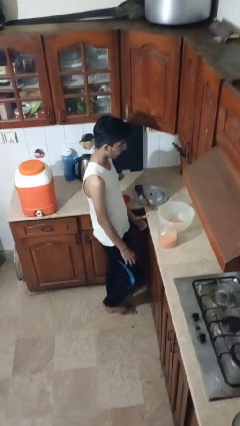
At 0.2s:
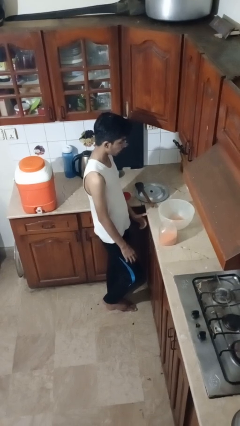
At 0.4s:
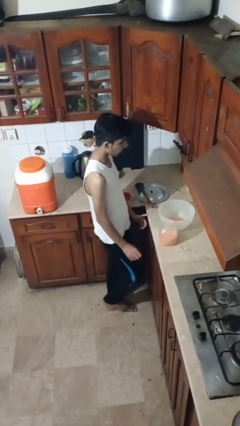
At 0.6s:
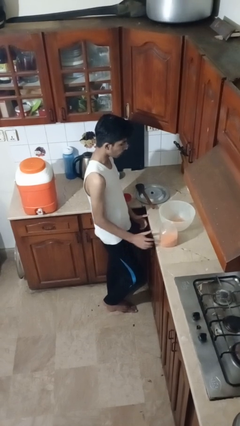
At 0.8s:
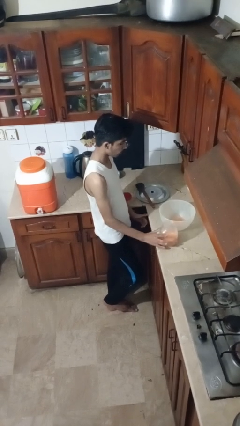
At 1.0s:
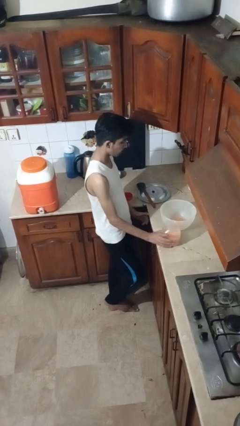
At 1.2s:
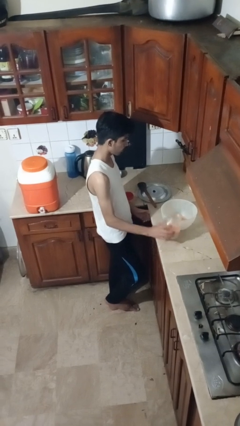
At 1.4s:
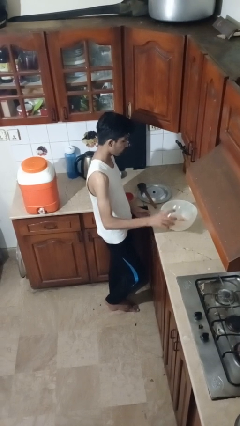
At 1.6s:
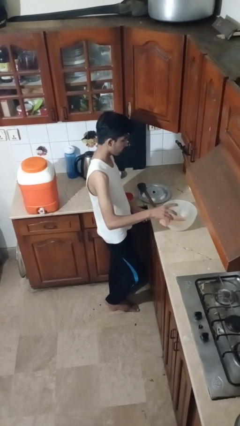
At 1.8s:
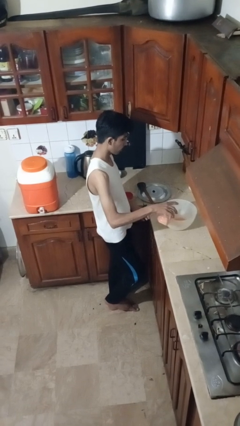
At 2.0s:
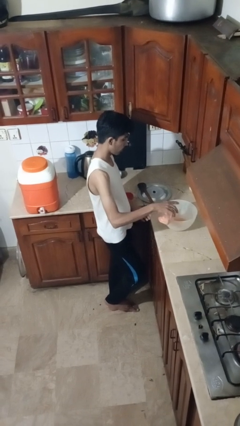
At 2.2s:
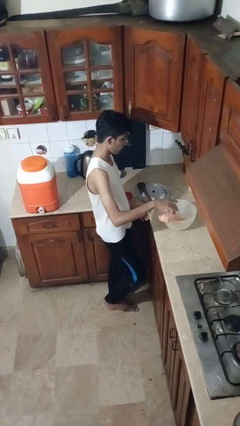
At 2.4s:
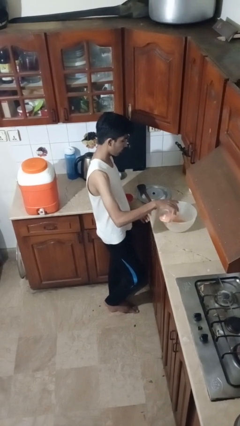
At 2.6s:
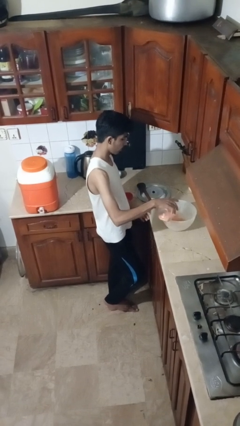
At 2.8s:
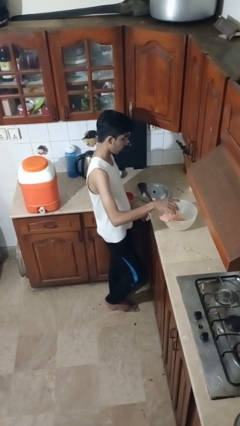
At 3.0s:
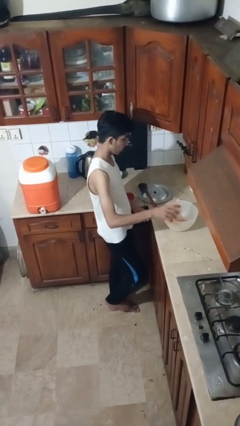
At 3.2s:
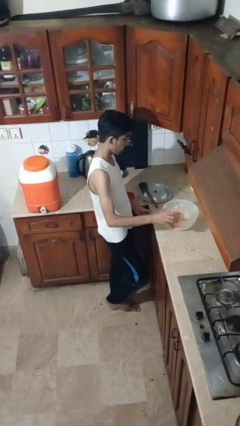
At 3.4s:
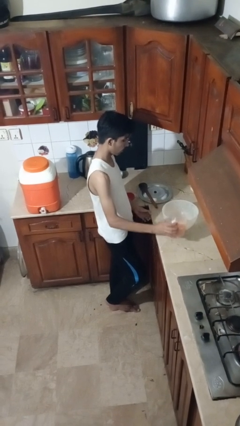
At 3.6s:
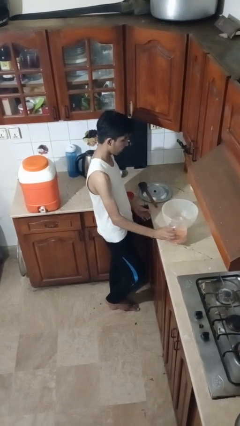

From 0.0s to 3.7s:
person pours into bowl

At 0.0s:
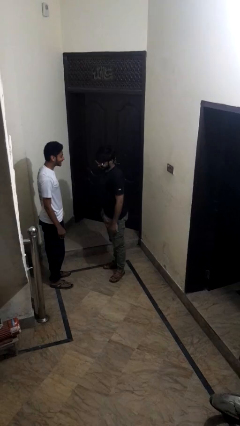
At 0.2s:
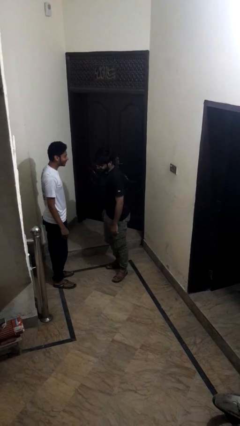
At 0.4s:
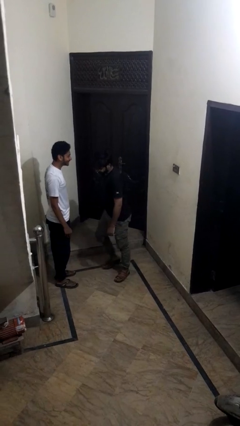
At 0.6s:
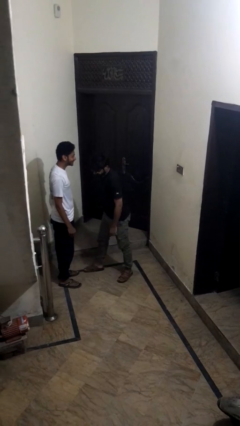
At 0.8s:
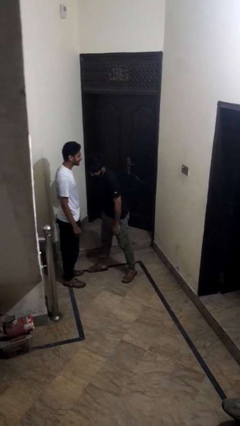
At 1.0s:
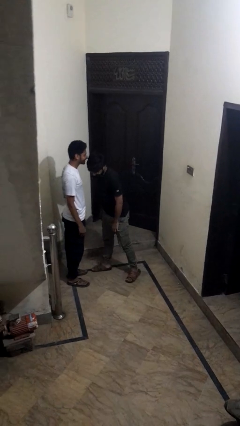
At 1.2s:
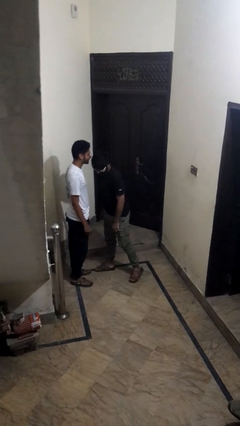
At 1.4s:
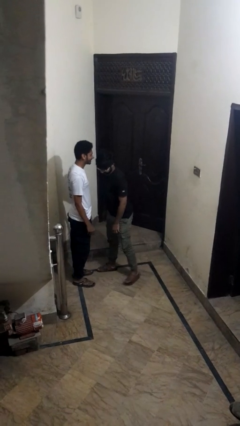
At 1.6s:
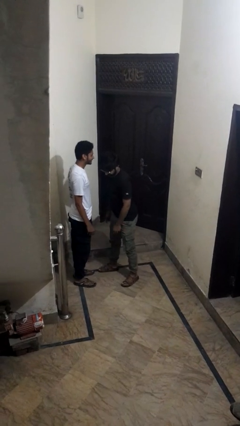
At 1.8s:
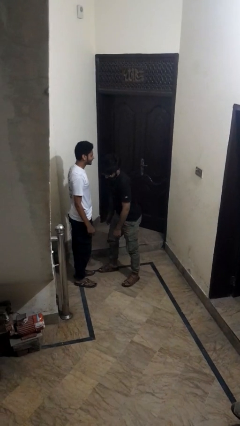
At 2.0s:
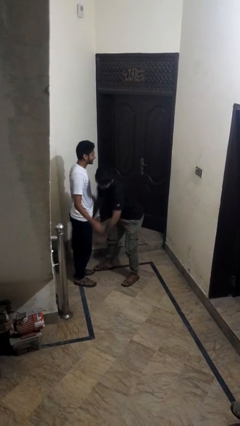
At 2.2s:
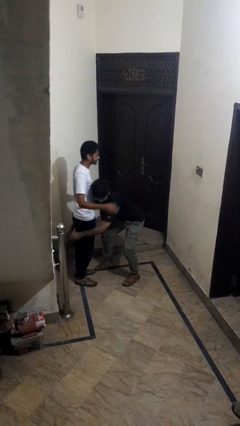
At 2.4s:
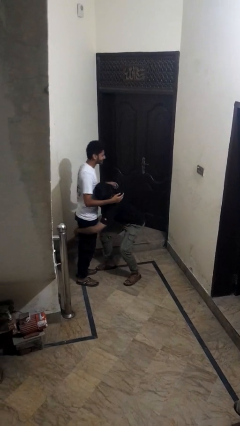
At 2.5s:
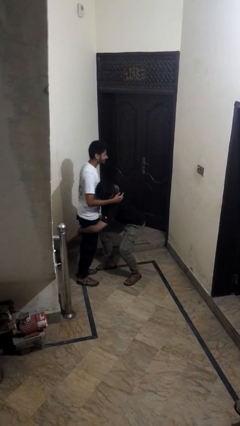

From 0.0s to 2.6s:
person puts on hat

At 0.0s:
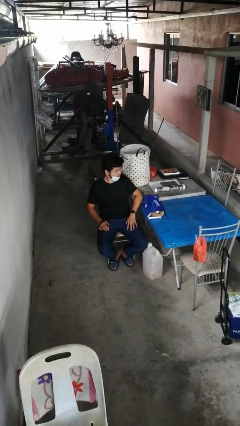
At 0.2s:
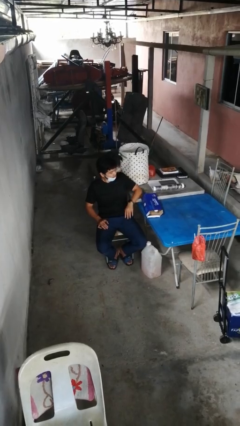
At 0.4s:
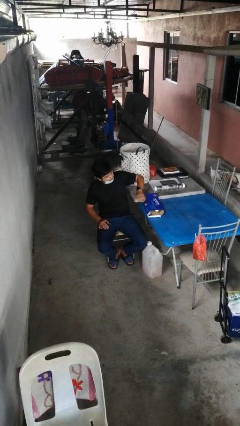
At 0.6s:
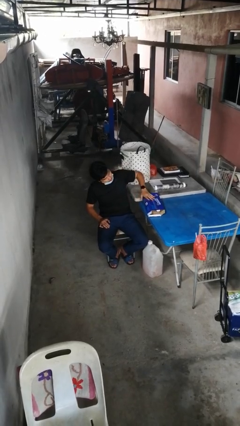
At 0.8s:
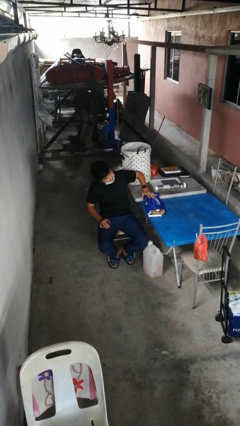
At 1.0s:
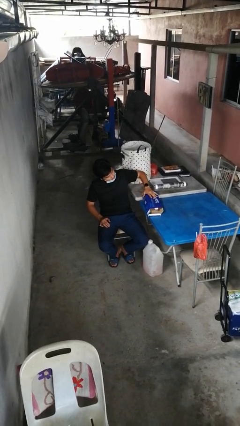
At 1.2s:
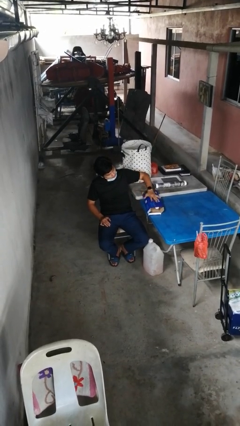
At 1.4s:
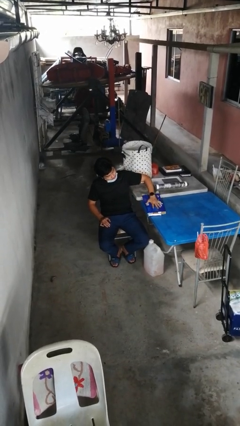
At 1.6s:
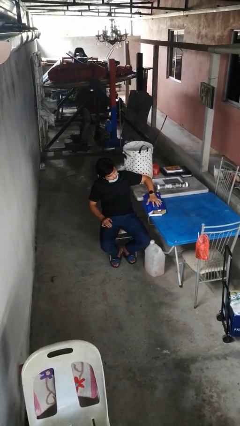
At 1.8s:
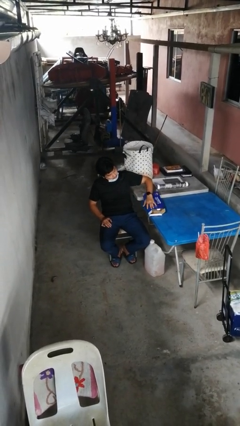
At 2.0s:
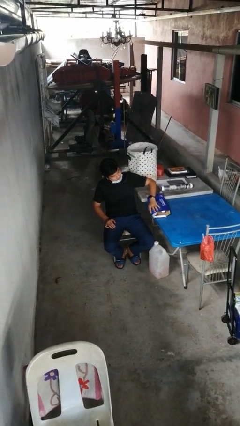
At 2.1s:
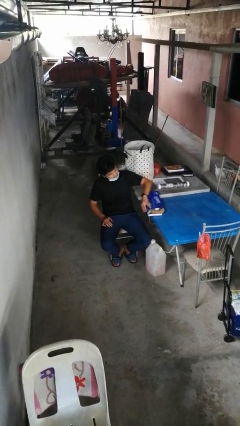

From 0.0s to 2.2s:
person taps object with finger

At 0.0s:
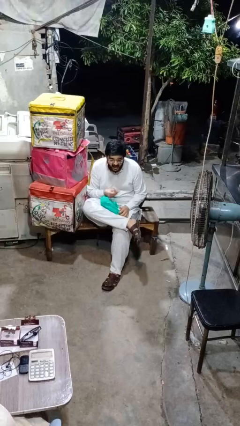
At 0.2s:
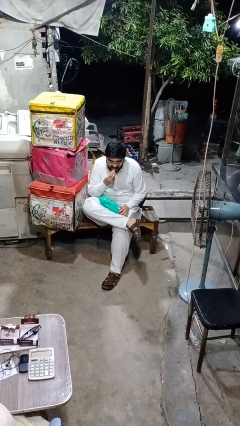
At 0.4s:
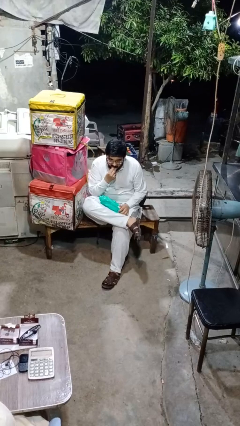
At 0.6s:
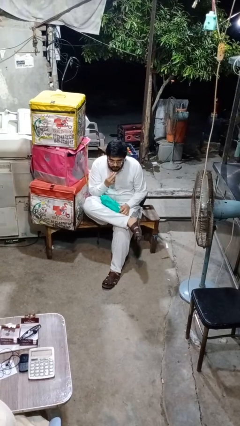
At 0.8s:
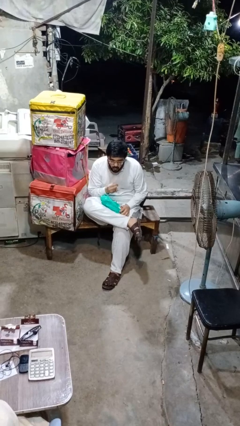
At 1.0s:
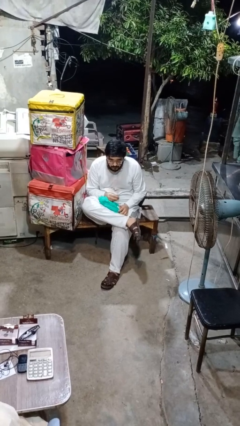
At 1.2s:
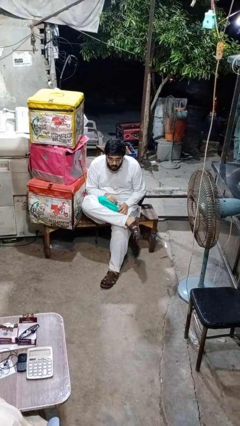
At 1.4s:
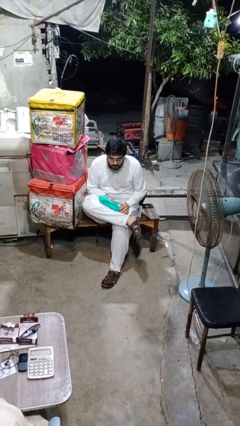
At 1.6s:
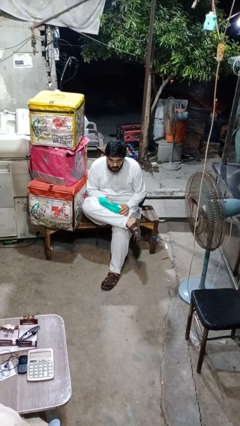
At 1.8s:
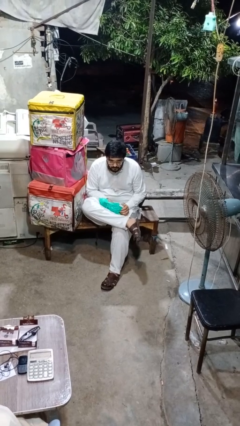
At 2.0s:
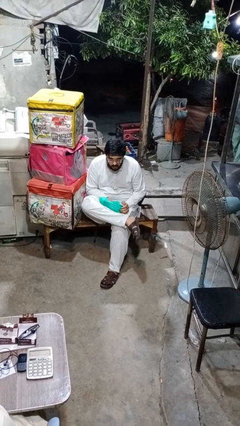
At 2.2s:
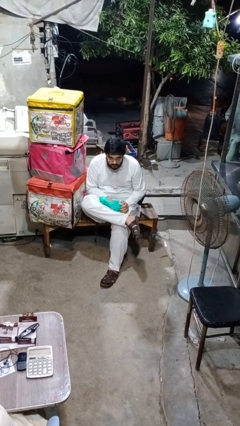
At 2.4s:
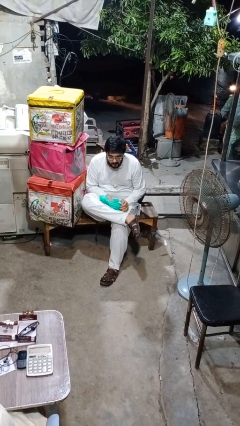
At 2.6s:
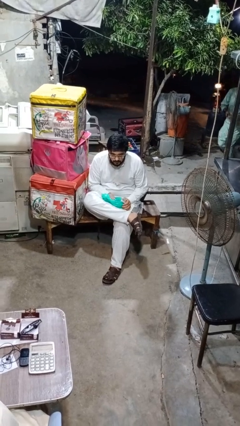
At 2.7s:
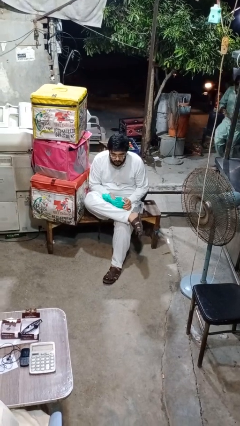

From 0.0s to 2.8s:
person eats snack from bag

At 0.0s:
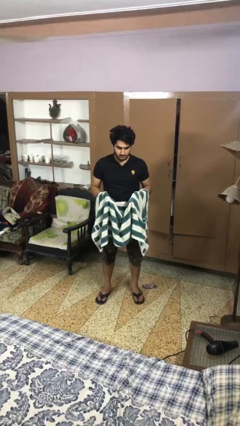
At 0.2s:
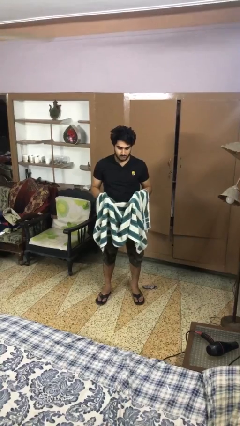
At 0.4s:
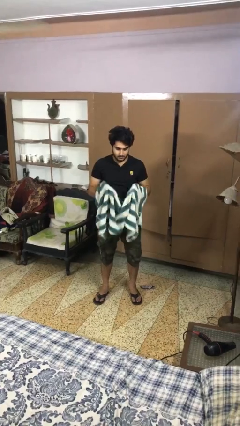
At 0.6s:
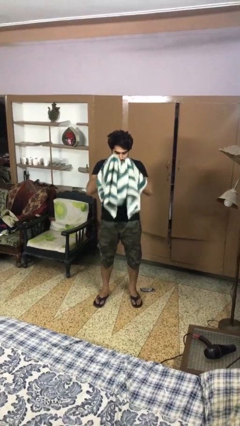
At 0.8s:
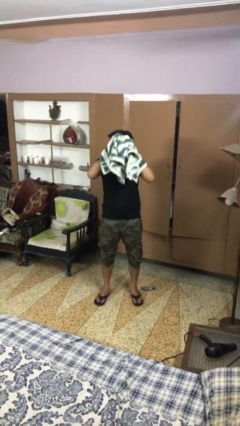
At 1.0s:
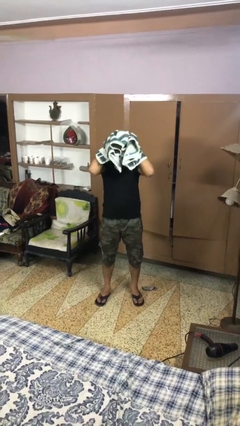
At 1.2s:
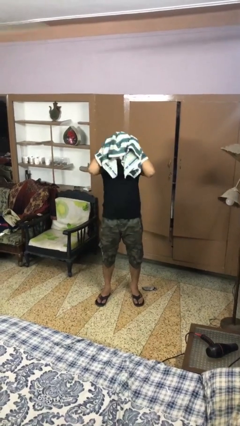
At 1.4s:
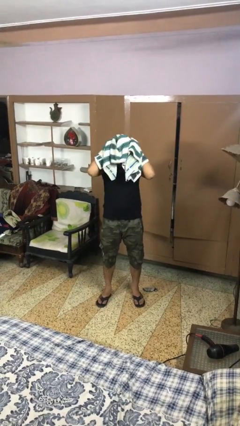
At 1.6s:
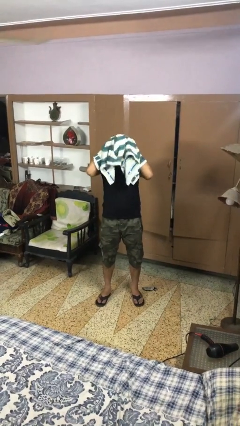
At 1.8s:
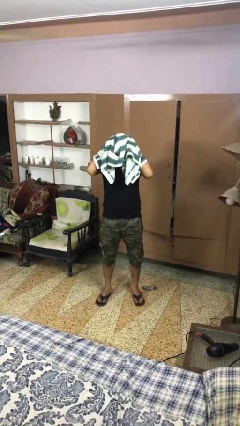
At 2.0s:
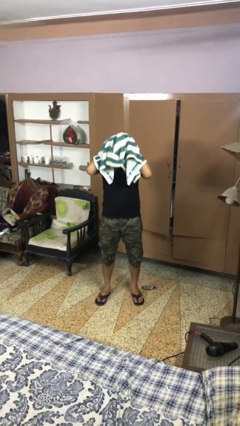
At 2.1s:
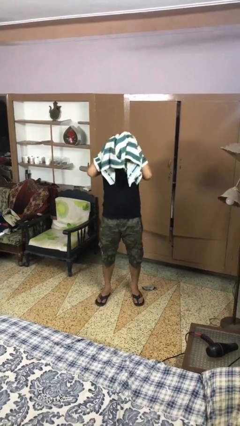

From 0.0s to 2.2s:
person dries hair with towel

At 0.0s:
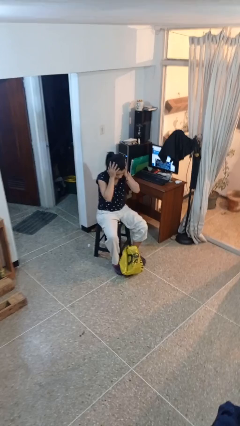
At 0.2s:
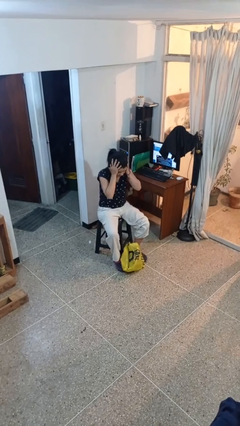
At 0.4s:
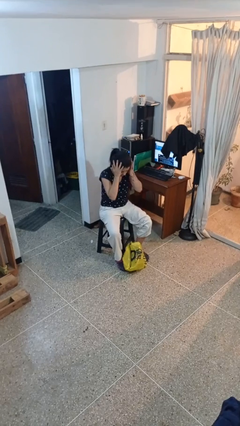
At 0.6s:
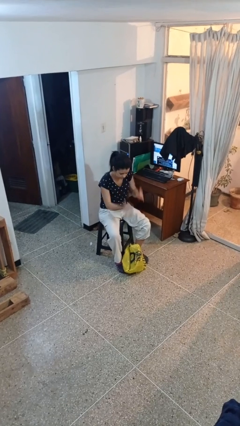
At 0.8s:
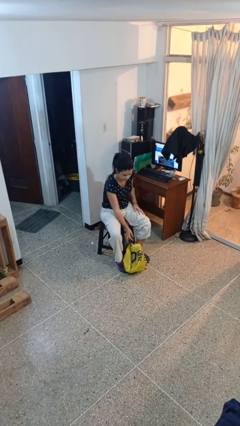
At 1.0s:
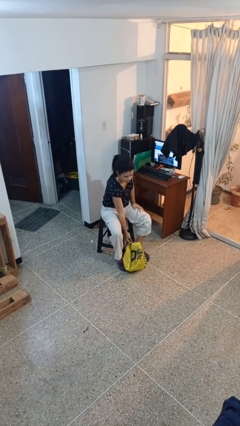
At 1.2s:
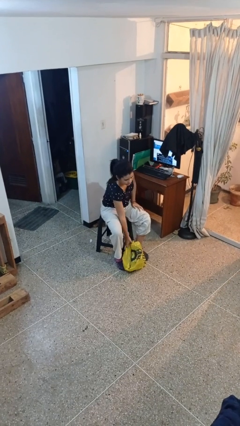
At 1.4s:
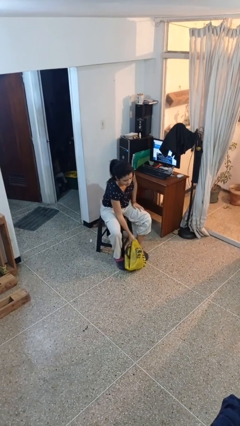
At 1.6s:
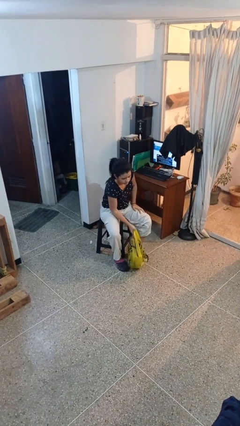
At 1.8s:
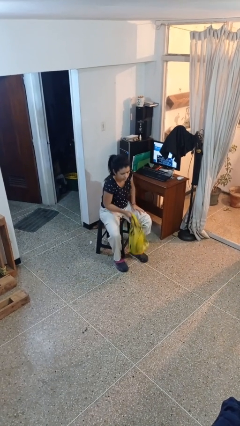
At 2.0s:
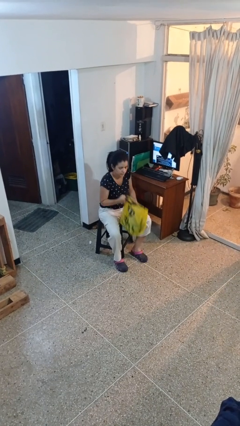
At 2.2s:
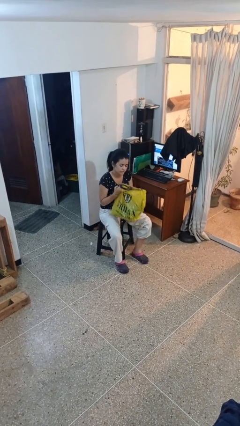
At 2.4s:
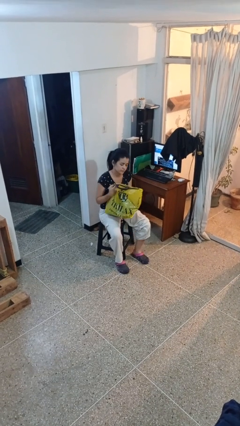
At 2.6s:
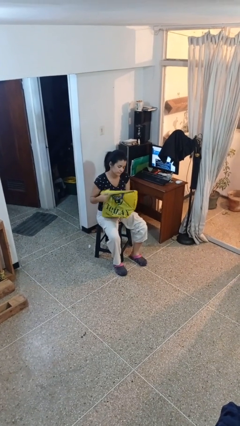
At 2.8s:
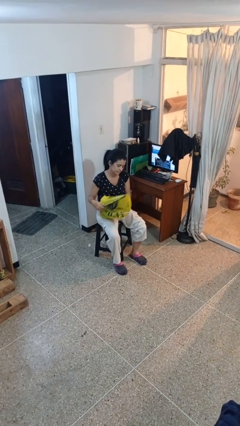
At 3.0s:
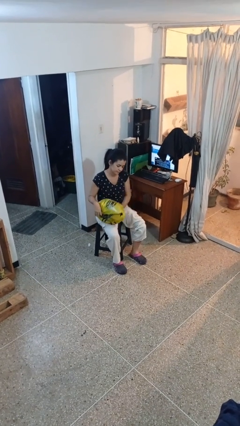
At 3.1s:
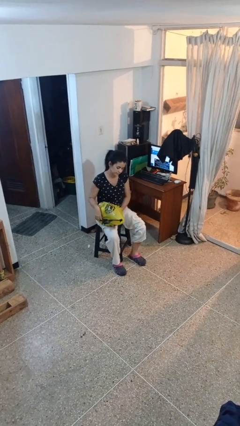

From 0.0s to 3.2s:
person picks up object from floor

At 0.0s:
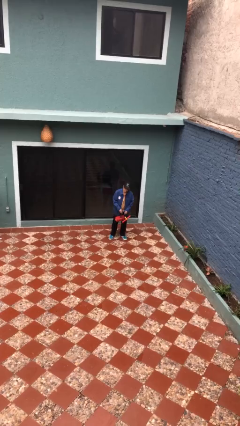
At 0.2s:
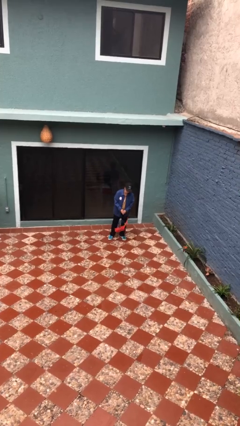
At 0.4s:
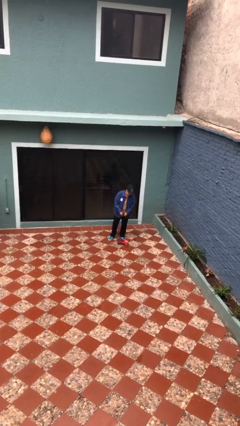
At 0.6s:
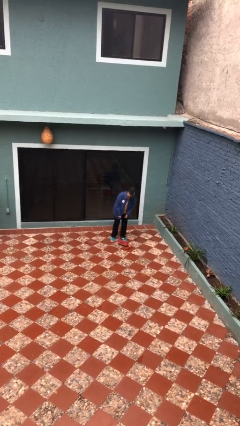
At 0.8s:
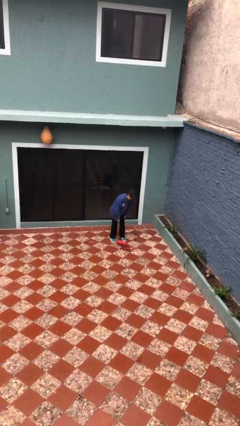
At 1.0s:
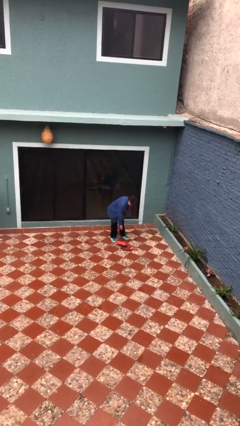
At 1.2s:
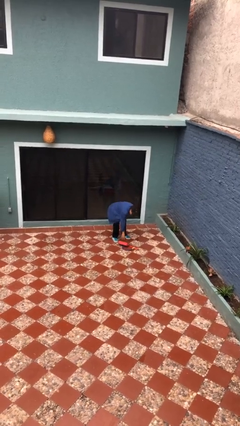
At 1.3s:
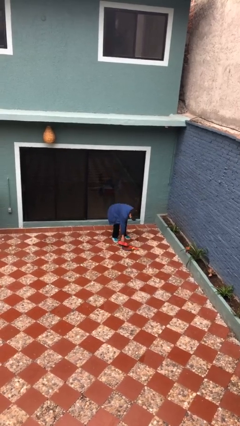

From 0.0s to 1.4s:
person drops object
